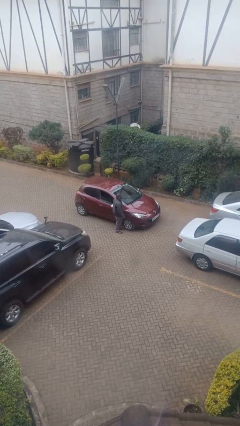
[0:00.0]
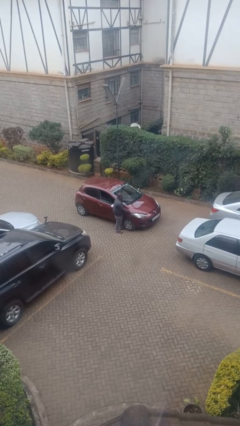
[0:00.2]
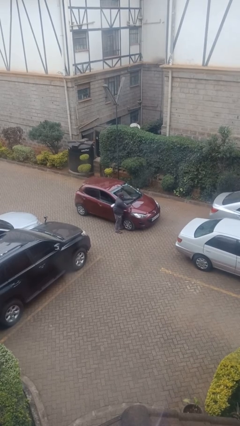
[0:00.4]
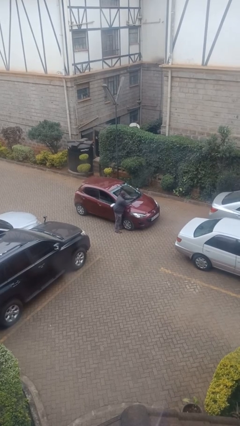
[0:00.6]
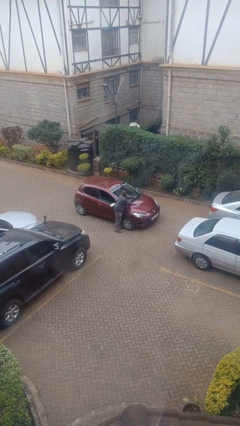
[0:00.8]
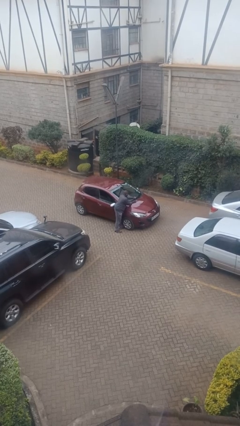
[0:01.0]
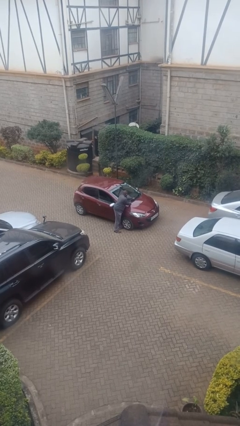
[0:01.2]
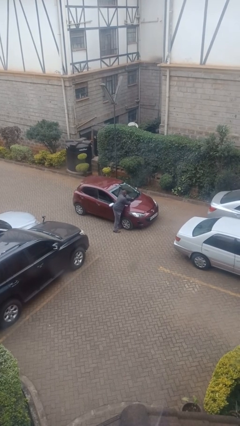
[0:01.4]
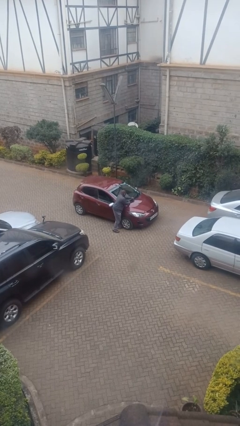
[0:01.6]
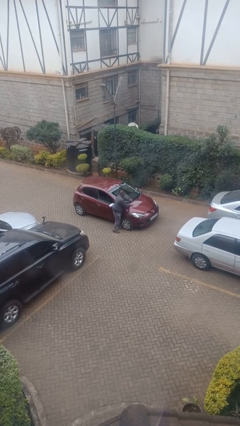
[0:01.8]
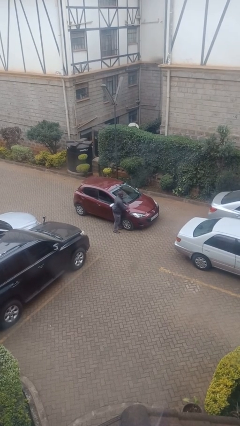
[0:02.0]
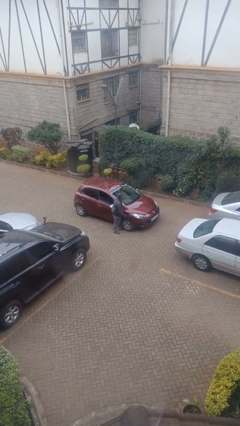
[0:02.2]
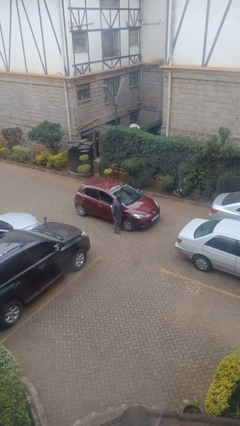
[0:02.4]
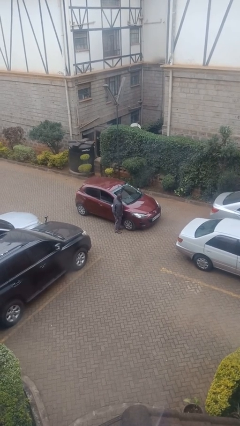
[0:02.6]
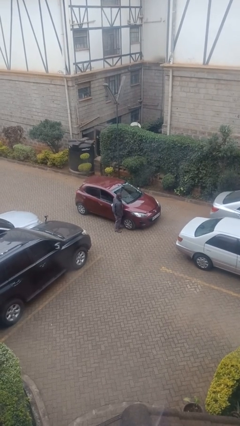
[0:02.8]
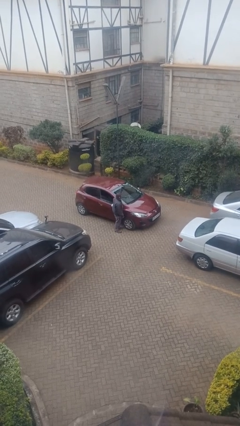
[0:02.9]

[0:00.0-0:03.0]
person flips down car wipers

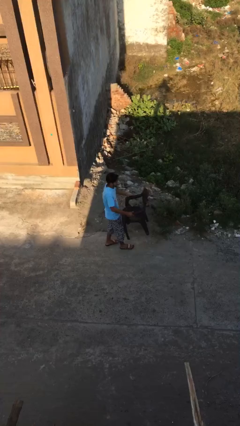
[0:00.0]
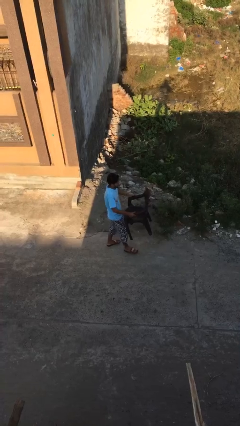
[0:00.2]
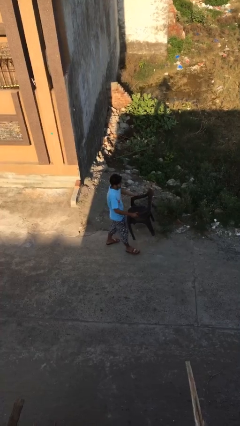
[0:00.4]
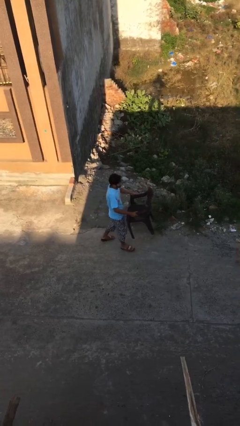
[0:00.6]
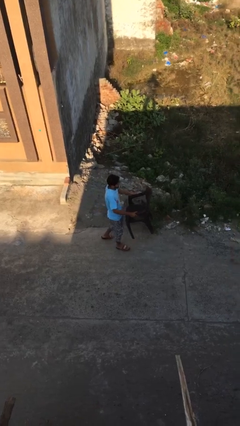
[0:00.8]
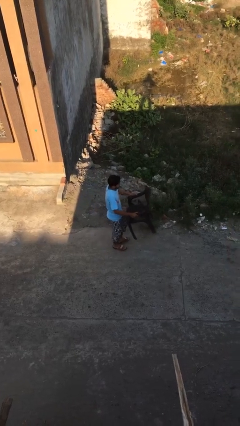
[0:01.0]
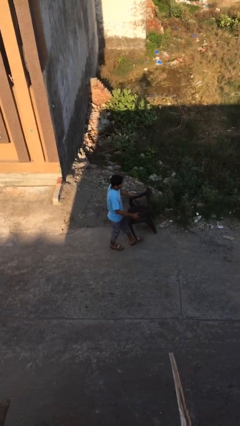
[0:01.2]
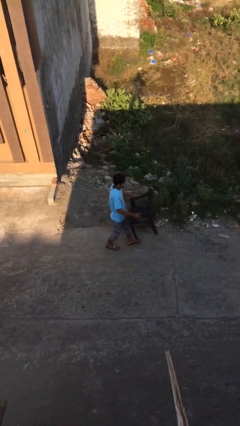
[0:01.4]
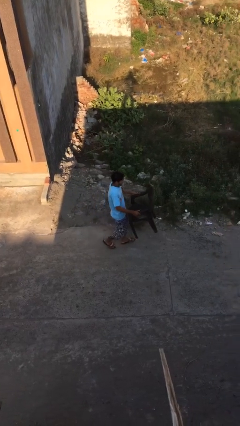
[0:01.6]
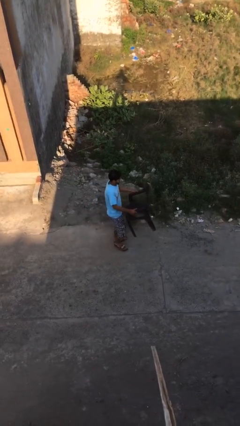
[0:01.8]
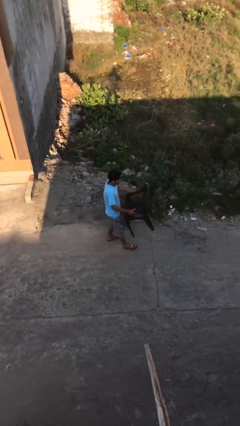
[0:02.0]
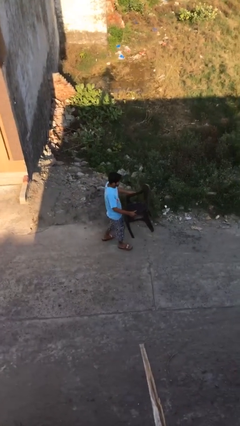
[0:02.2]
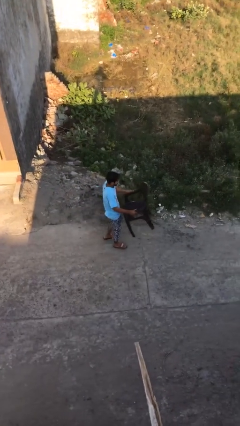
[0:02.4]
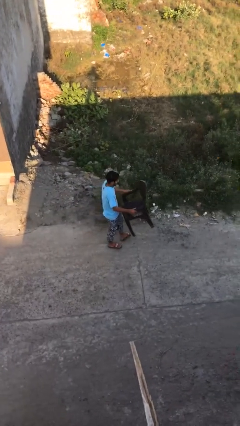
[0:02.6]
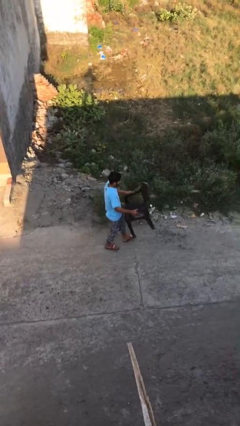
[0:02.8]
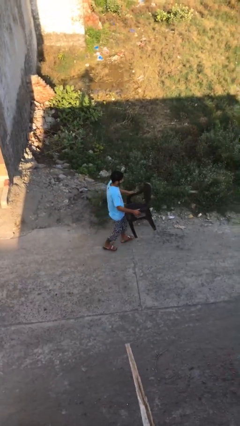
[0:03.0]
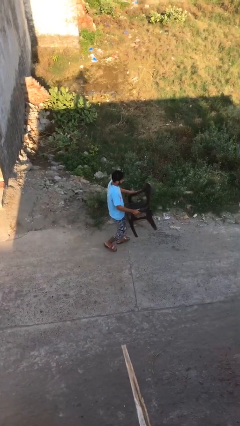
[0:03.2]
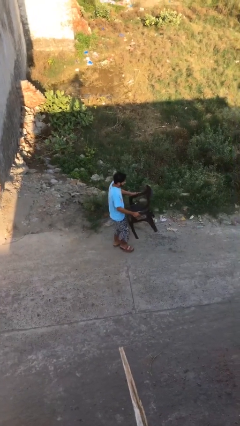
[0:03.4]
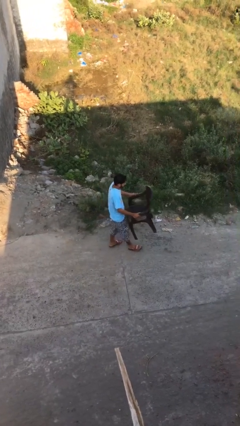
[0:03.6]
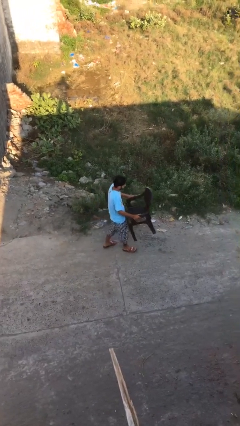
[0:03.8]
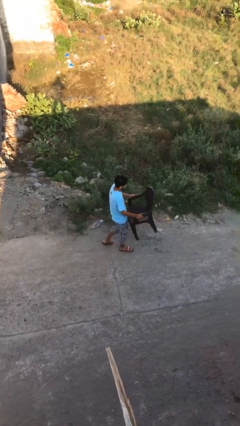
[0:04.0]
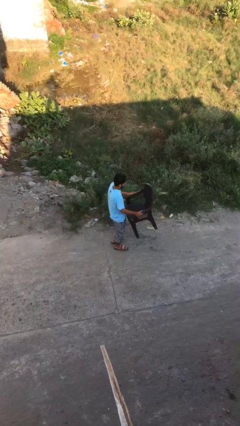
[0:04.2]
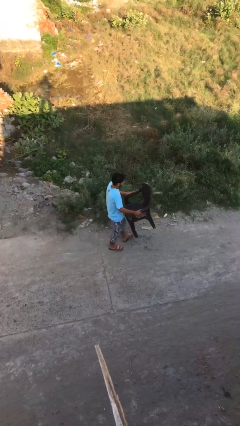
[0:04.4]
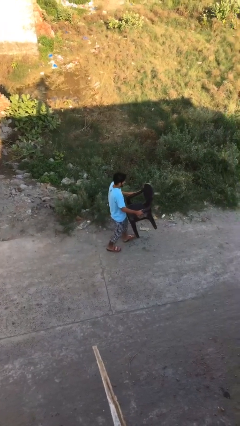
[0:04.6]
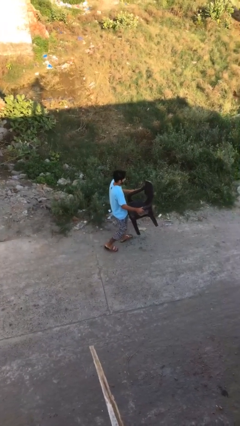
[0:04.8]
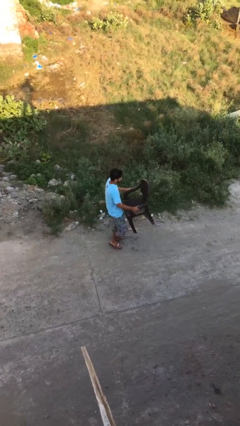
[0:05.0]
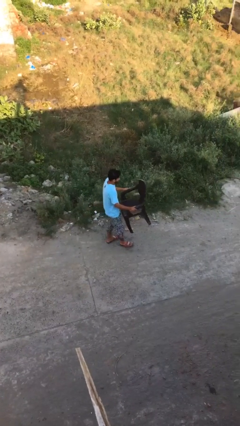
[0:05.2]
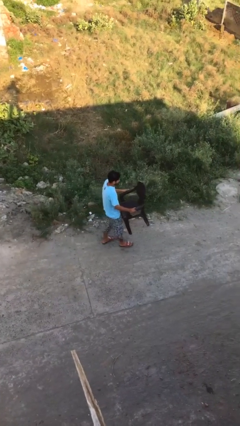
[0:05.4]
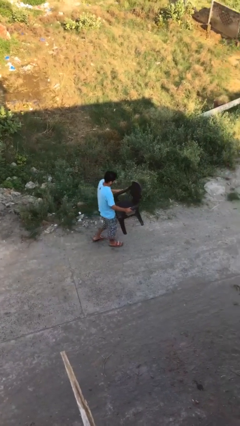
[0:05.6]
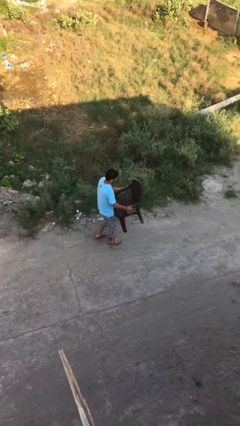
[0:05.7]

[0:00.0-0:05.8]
person carries heavy object

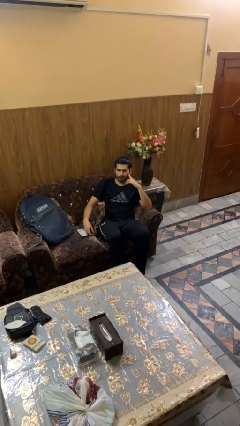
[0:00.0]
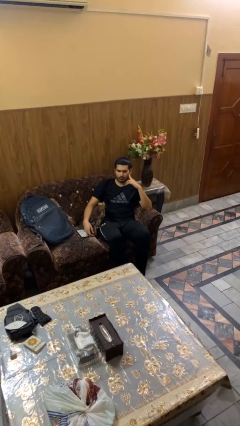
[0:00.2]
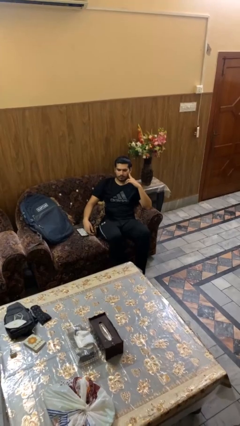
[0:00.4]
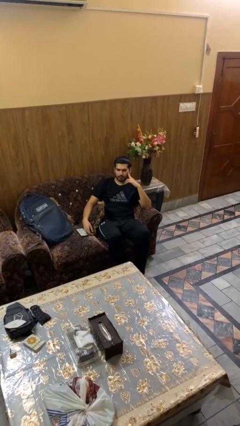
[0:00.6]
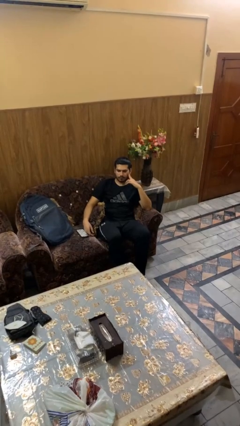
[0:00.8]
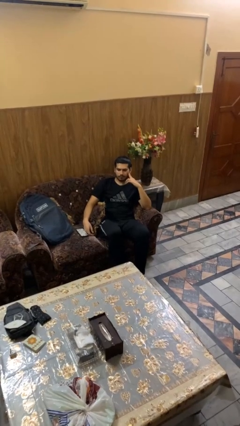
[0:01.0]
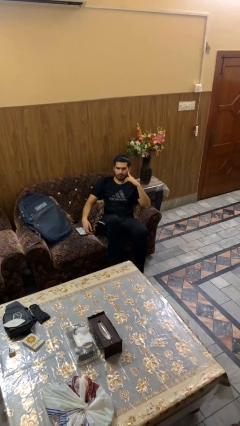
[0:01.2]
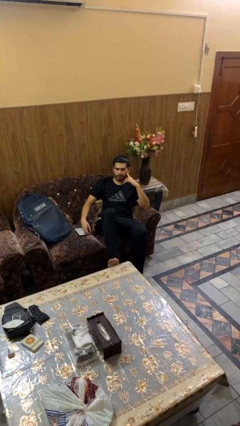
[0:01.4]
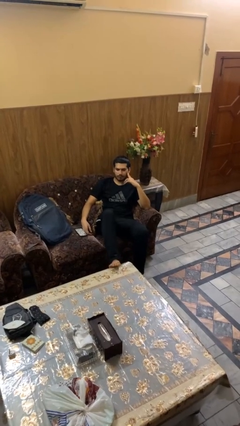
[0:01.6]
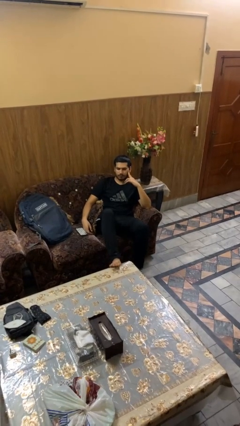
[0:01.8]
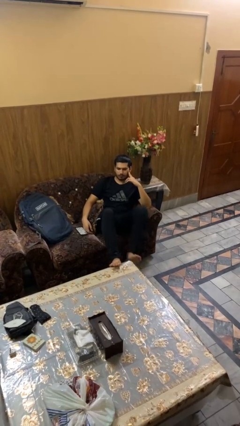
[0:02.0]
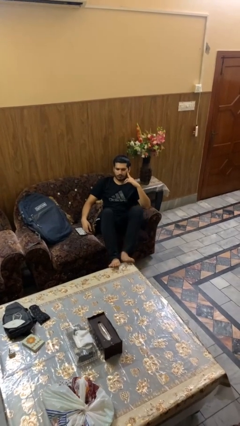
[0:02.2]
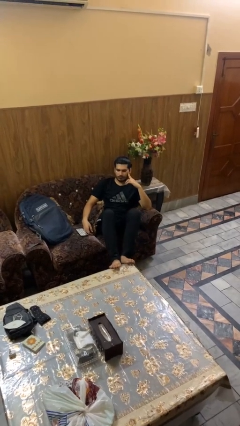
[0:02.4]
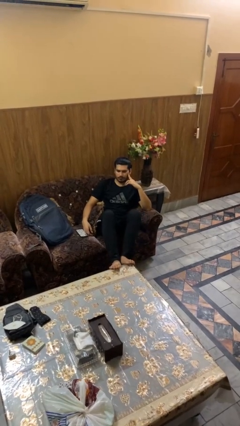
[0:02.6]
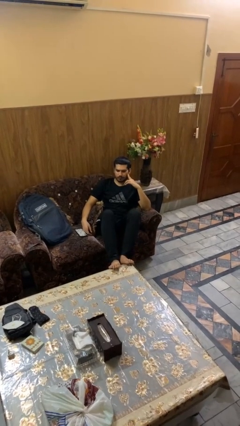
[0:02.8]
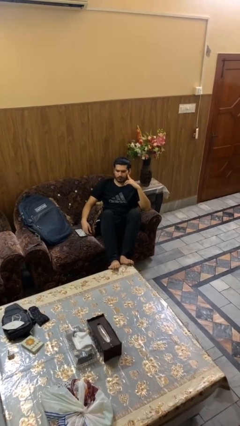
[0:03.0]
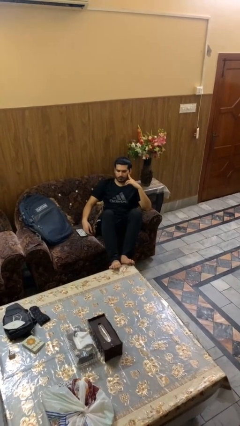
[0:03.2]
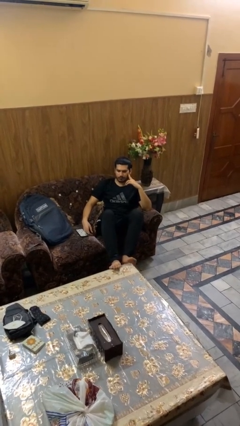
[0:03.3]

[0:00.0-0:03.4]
person puts feet up

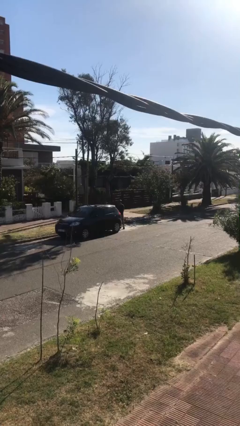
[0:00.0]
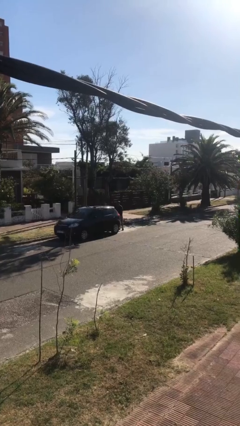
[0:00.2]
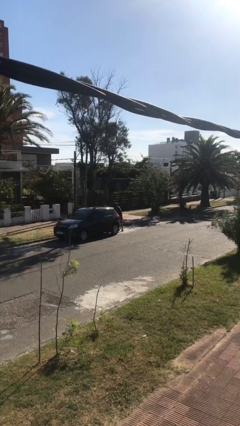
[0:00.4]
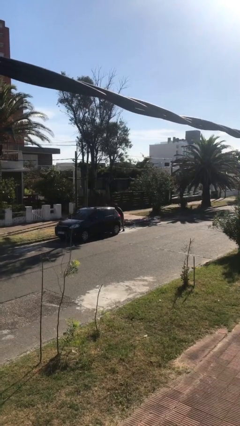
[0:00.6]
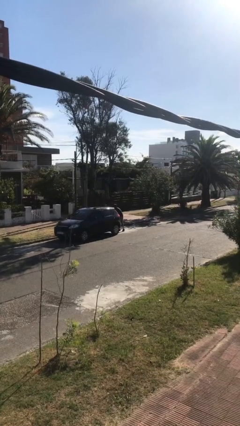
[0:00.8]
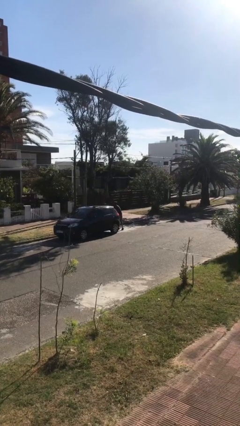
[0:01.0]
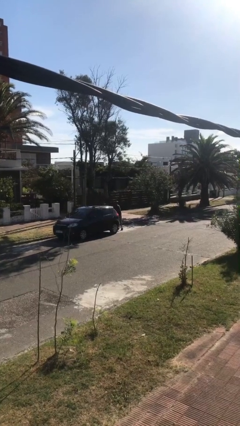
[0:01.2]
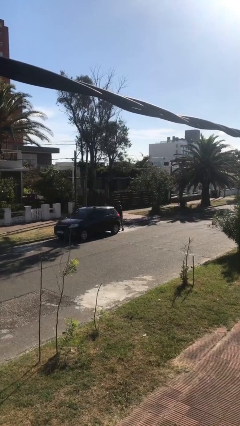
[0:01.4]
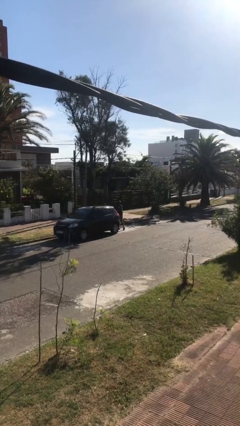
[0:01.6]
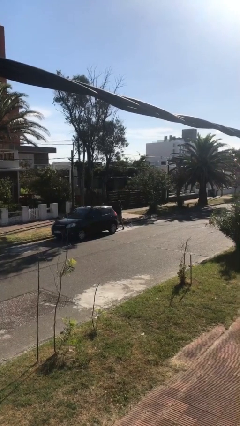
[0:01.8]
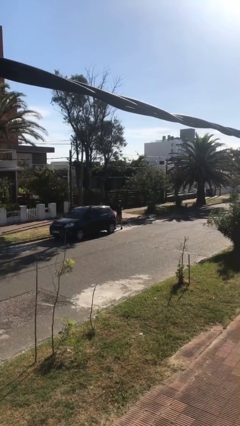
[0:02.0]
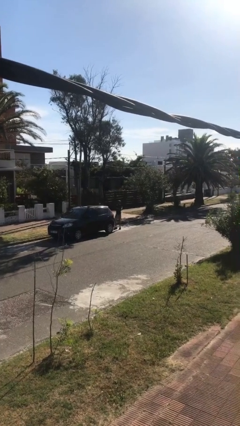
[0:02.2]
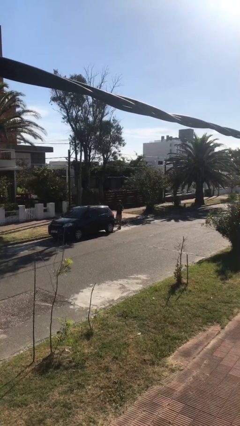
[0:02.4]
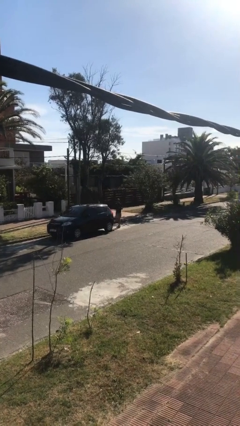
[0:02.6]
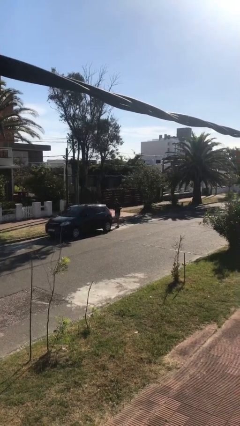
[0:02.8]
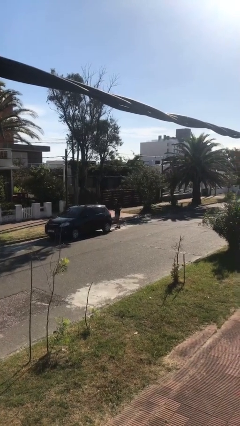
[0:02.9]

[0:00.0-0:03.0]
person unloads car

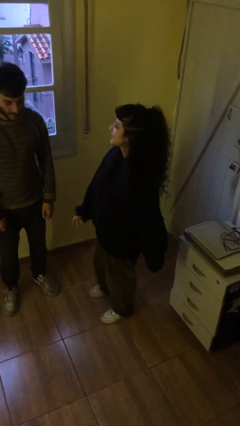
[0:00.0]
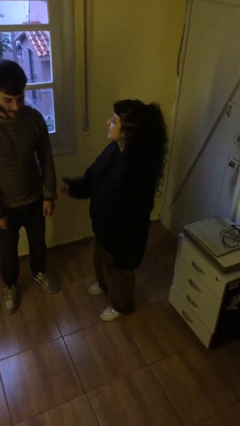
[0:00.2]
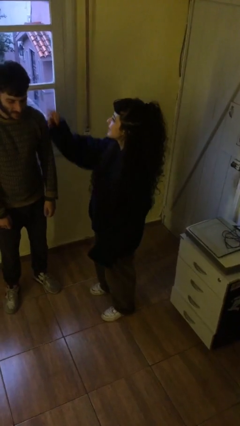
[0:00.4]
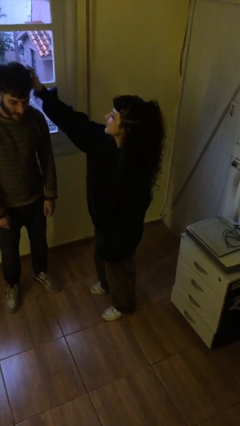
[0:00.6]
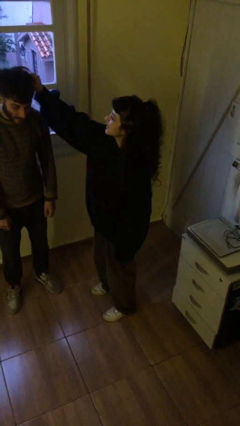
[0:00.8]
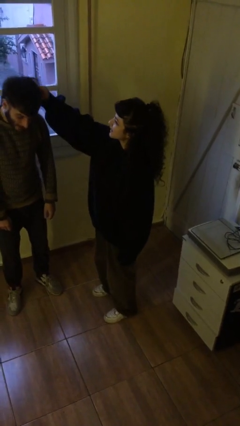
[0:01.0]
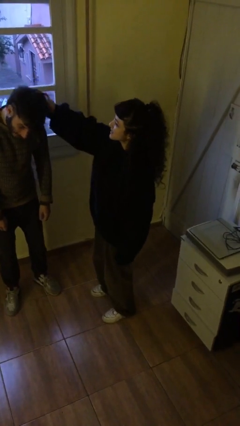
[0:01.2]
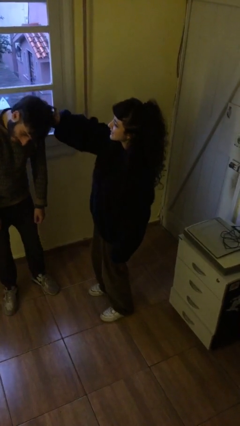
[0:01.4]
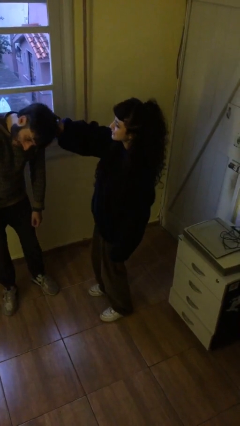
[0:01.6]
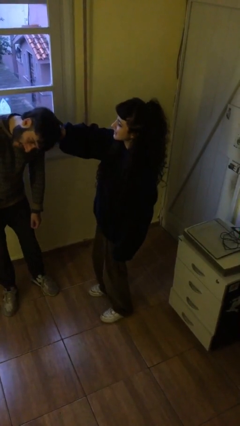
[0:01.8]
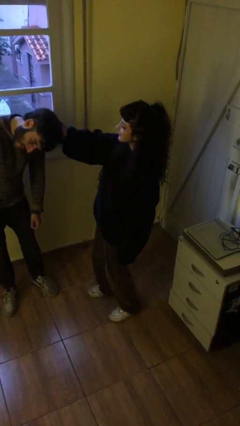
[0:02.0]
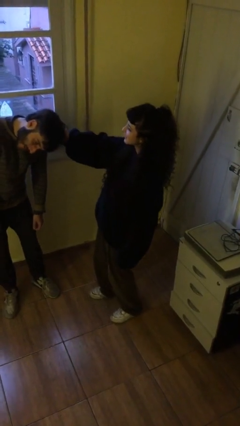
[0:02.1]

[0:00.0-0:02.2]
person grabs person by hair

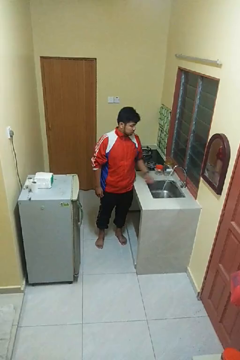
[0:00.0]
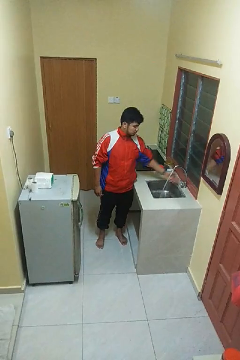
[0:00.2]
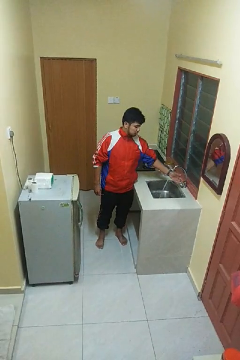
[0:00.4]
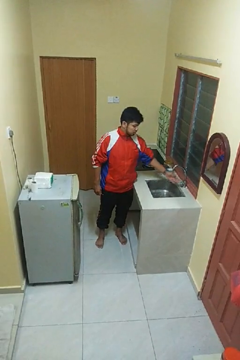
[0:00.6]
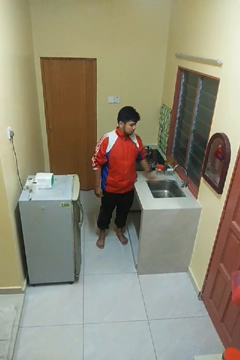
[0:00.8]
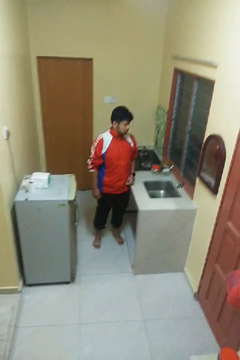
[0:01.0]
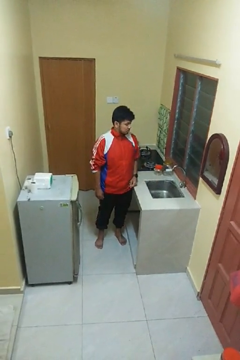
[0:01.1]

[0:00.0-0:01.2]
person turns off faucet
